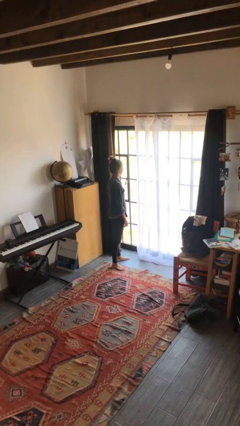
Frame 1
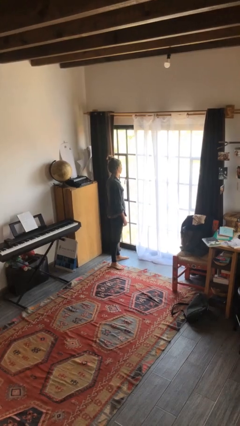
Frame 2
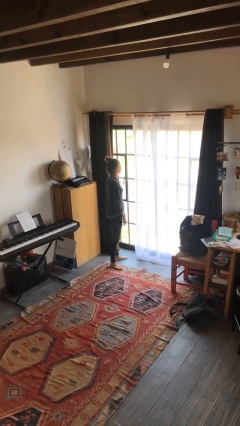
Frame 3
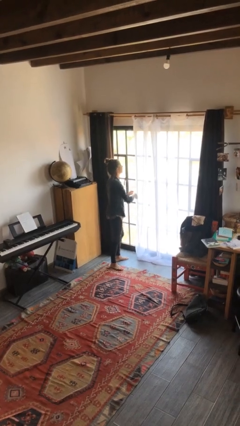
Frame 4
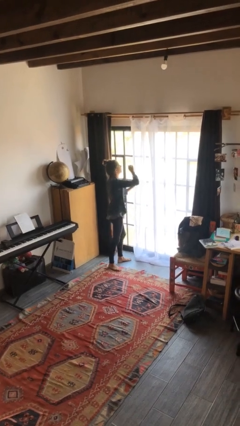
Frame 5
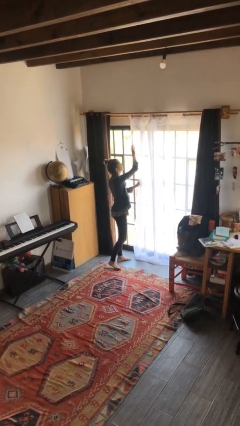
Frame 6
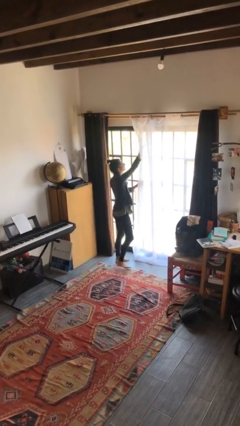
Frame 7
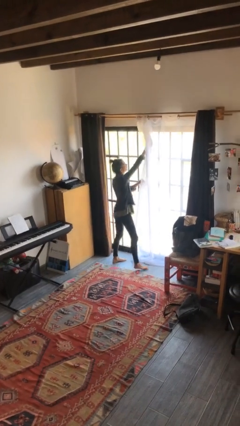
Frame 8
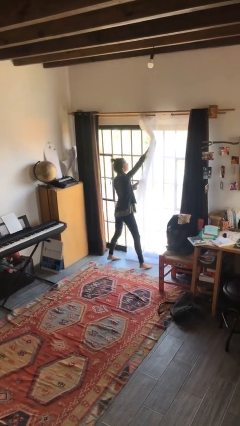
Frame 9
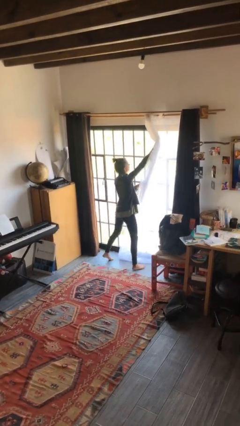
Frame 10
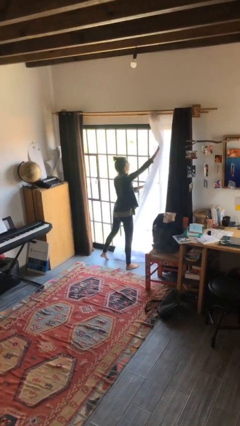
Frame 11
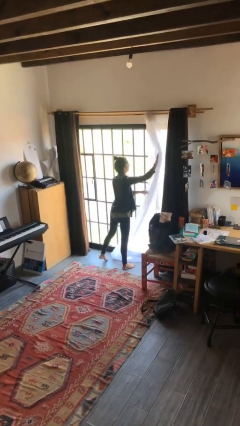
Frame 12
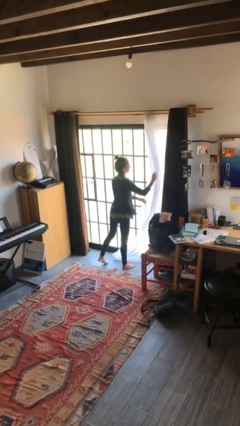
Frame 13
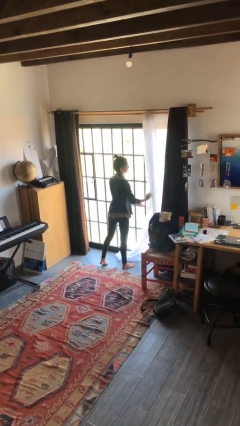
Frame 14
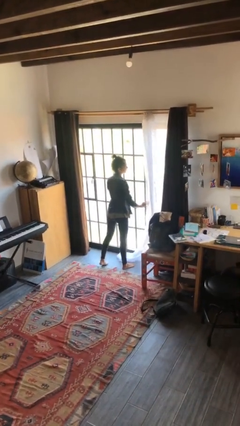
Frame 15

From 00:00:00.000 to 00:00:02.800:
person opens curtains

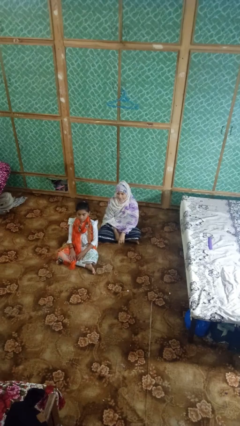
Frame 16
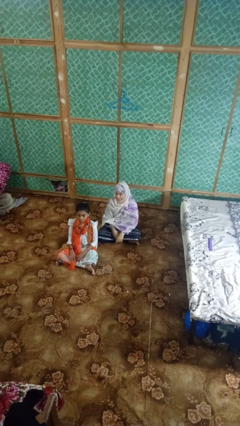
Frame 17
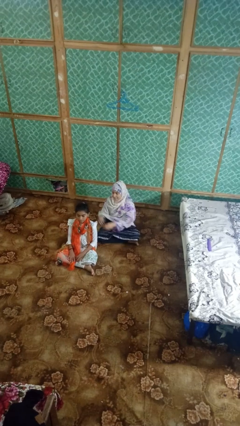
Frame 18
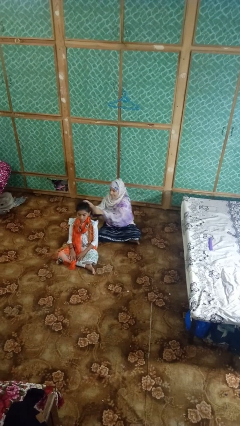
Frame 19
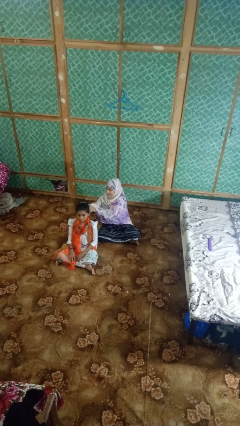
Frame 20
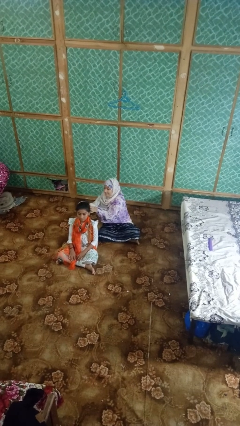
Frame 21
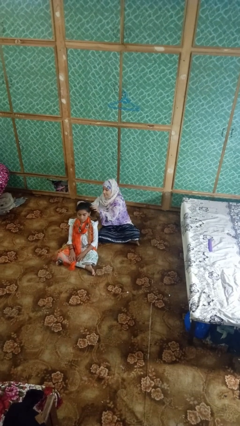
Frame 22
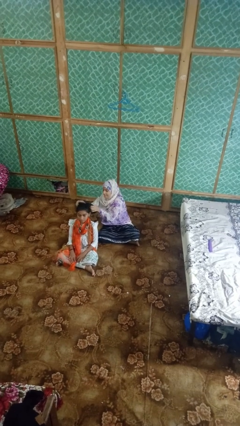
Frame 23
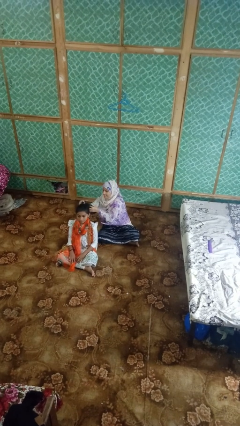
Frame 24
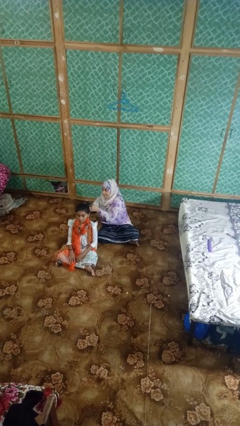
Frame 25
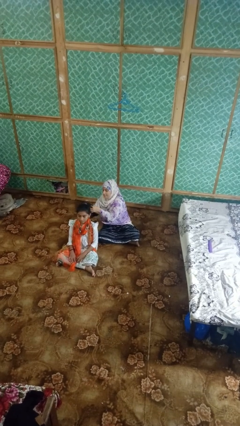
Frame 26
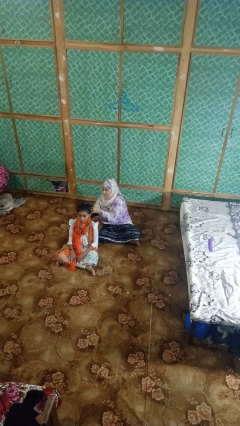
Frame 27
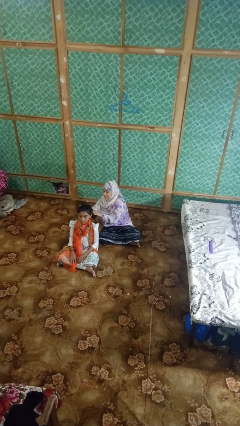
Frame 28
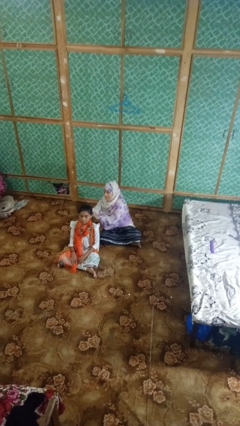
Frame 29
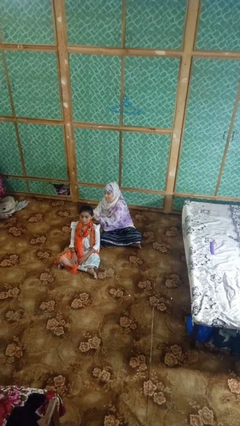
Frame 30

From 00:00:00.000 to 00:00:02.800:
person braids hair of person

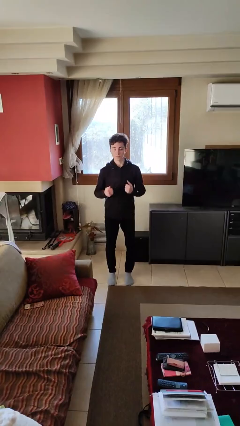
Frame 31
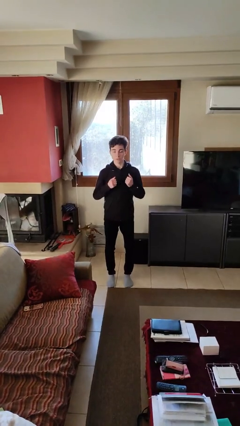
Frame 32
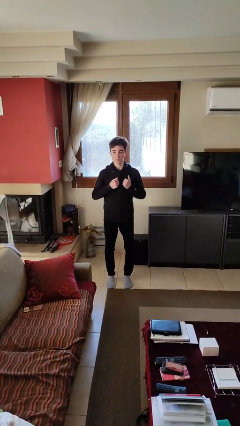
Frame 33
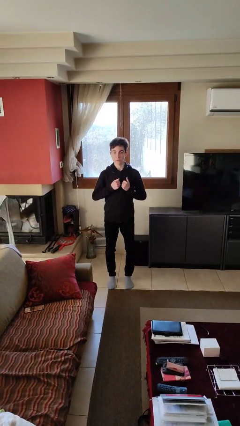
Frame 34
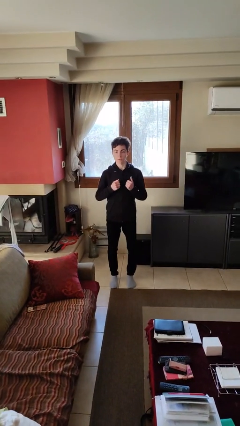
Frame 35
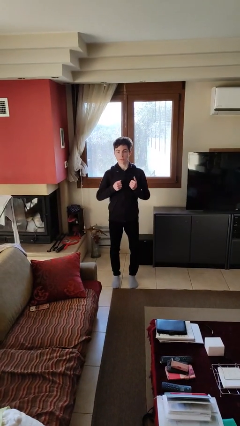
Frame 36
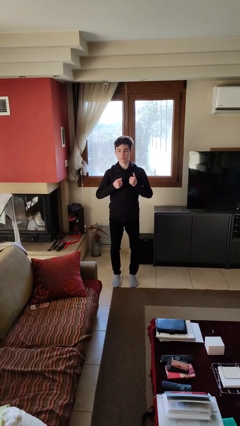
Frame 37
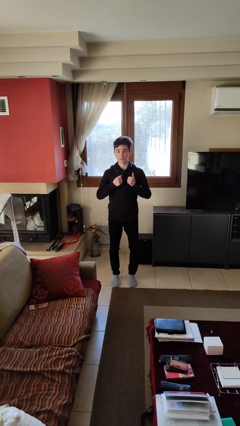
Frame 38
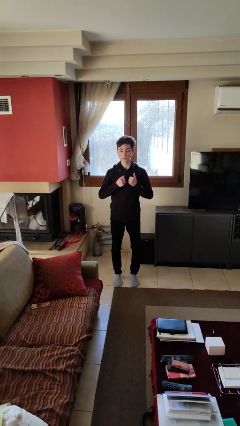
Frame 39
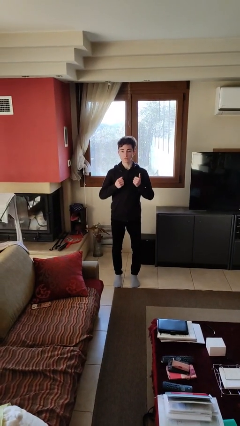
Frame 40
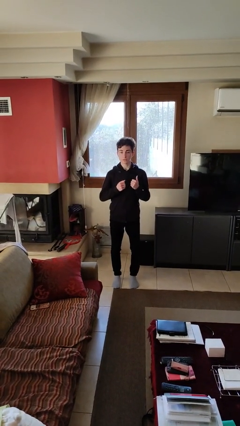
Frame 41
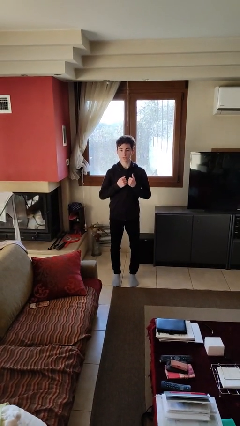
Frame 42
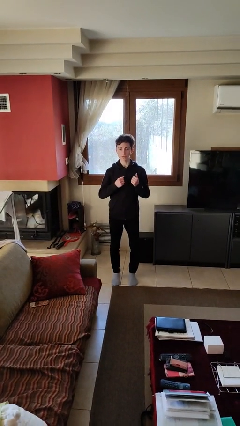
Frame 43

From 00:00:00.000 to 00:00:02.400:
person drums on chest

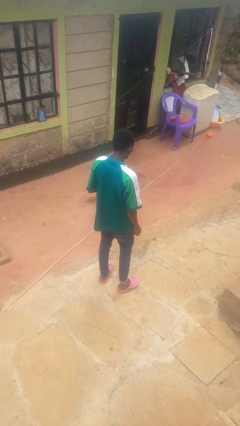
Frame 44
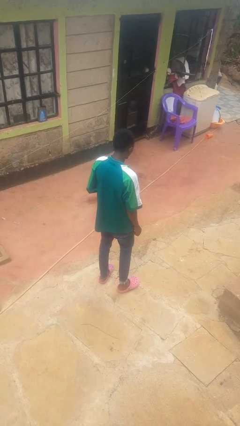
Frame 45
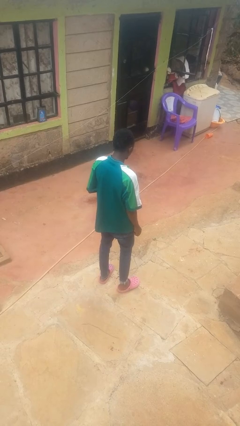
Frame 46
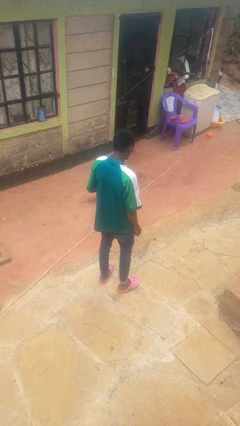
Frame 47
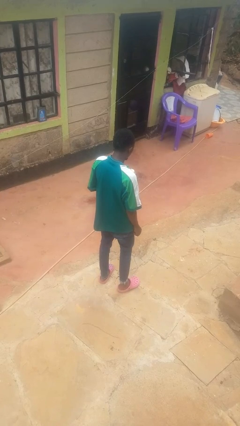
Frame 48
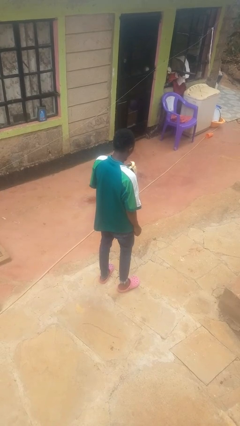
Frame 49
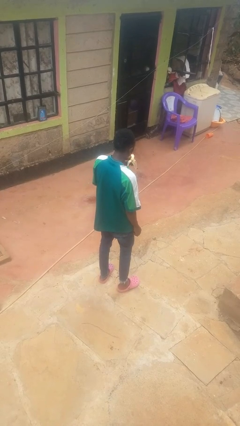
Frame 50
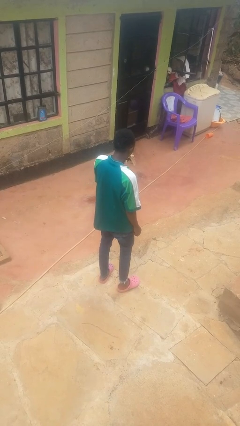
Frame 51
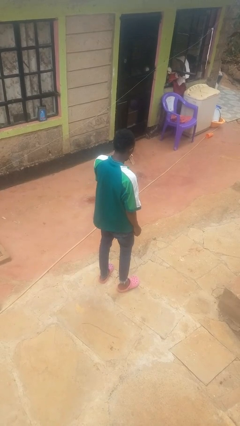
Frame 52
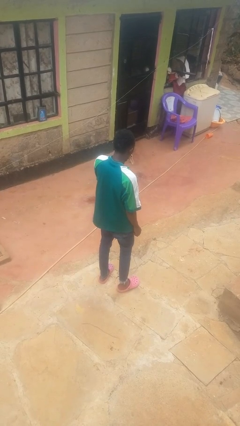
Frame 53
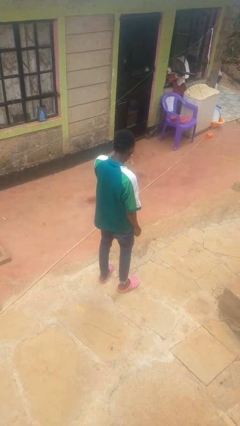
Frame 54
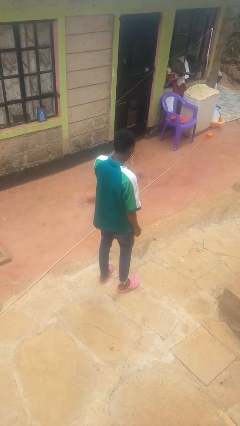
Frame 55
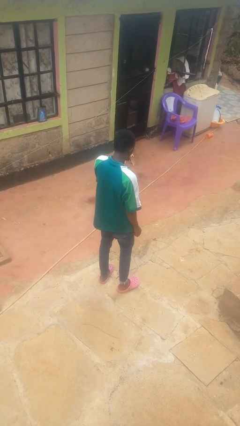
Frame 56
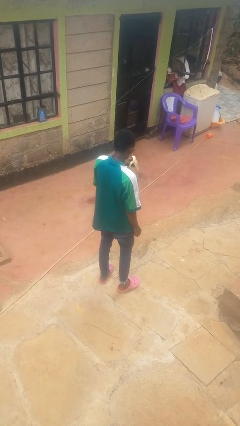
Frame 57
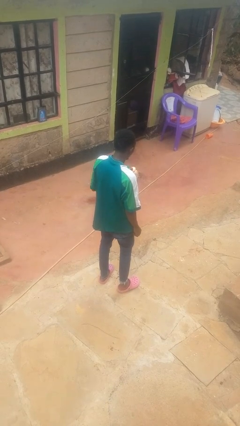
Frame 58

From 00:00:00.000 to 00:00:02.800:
person eats banana

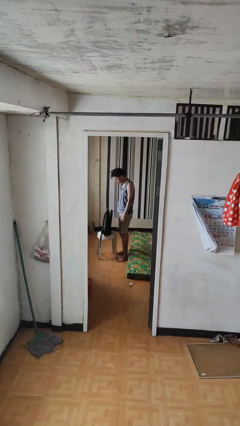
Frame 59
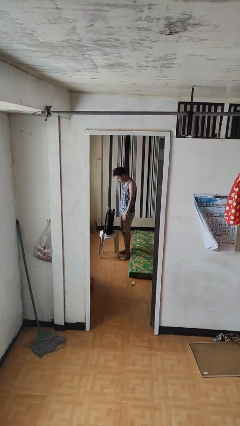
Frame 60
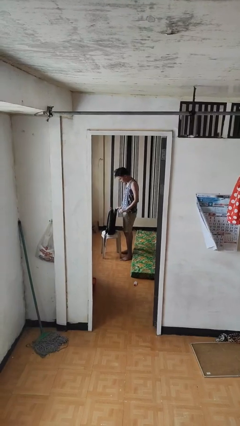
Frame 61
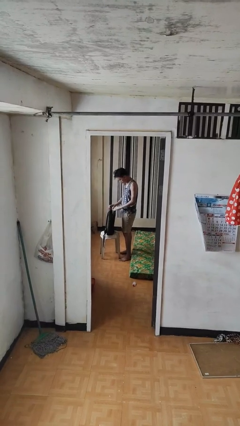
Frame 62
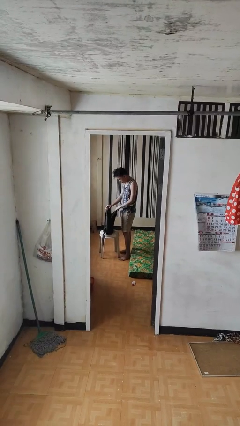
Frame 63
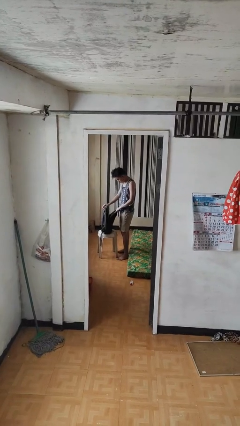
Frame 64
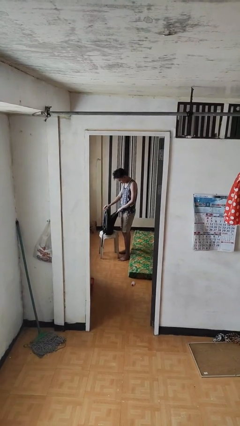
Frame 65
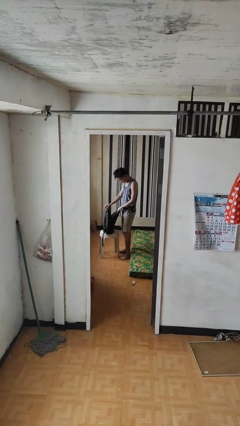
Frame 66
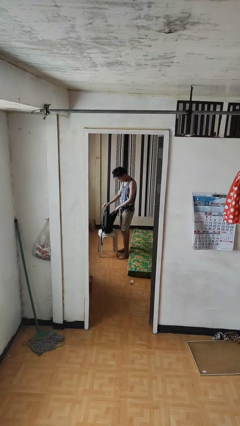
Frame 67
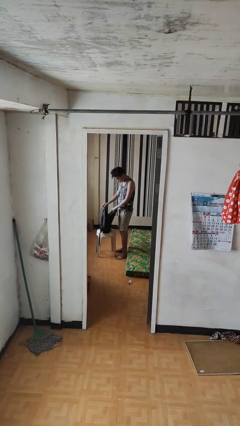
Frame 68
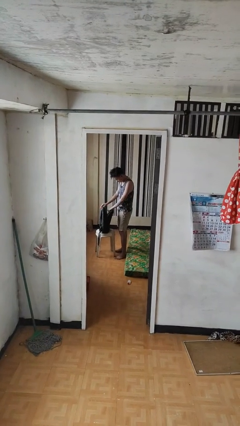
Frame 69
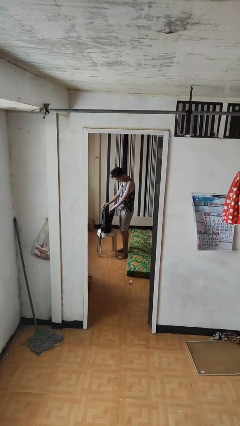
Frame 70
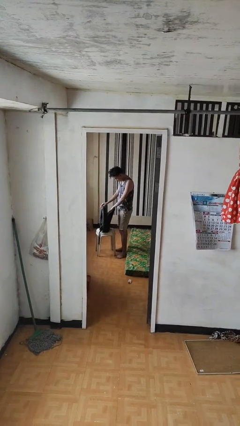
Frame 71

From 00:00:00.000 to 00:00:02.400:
person searches in backpack

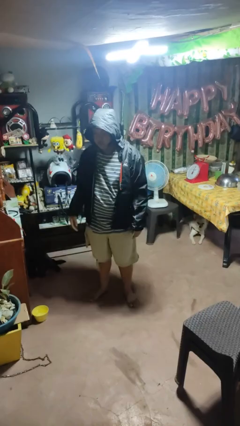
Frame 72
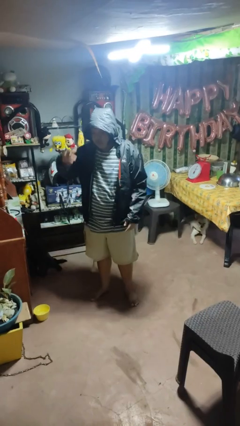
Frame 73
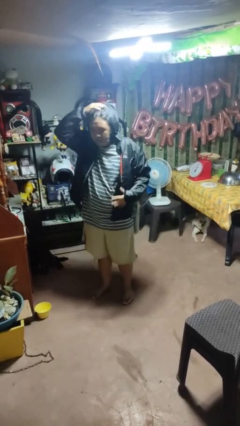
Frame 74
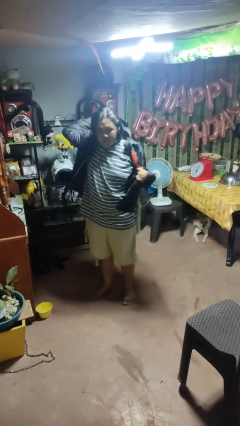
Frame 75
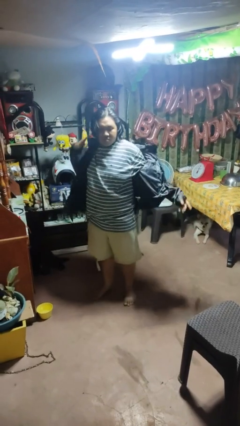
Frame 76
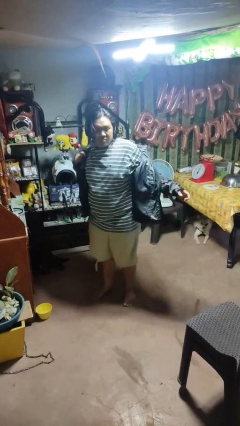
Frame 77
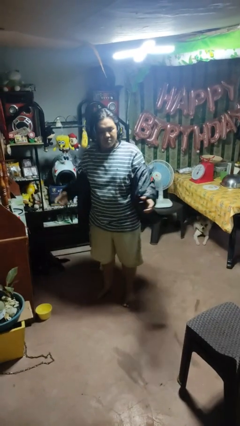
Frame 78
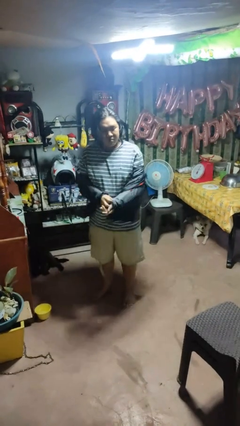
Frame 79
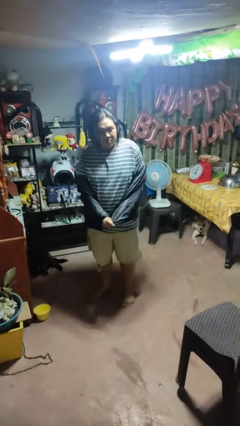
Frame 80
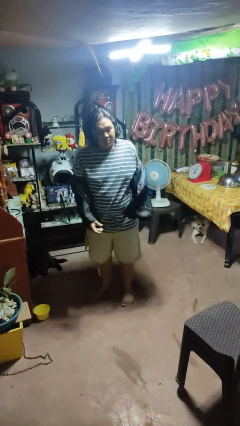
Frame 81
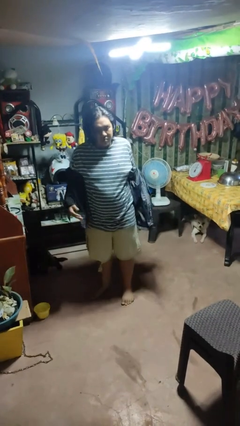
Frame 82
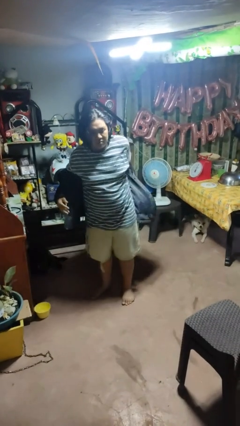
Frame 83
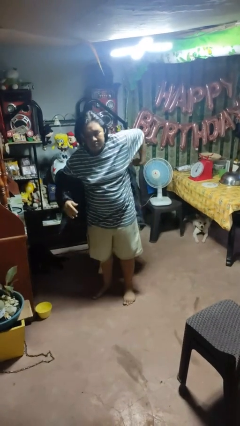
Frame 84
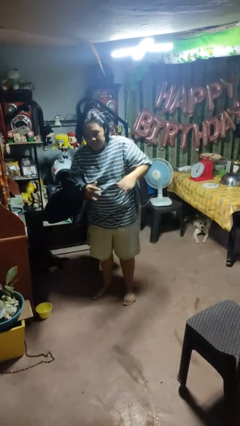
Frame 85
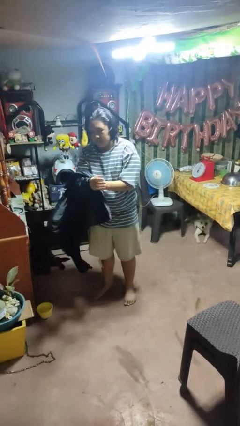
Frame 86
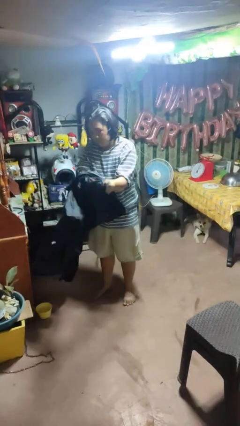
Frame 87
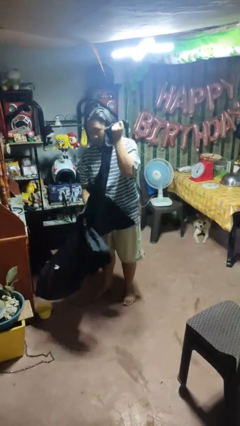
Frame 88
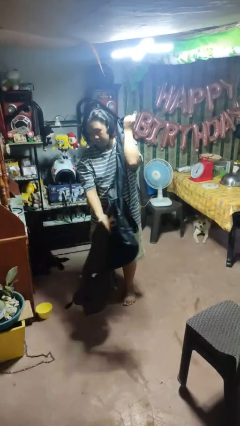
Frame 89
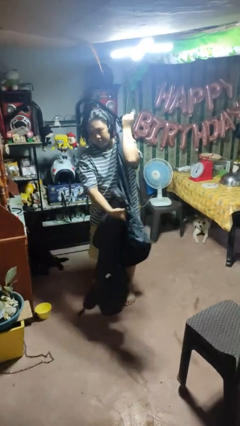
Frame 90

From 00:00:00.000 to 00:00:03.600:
person takes off hoodie

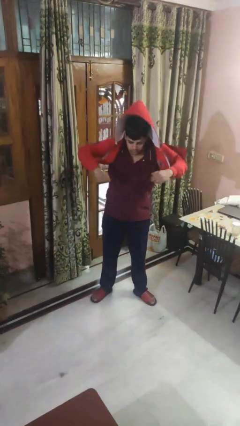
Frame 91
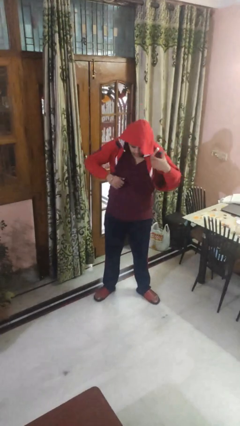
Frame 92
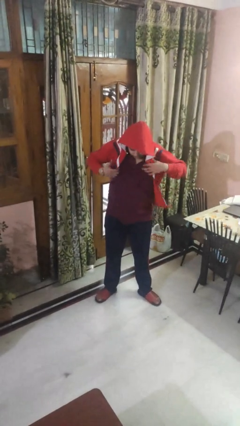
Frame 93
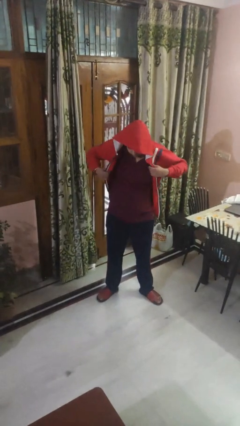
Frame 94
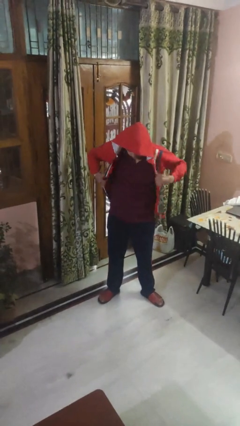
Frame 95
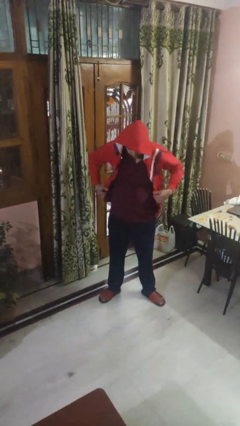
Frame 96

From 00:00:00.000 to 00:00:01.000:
person puts on hoodie
